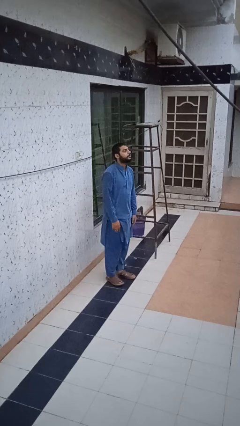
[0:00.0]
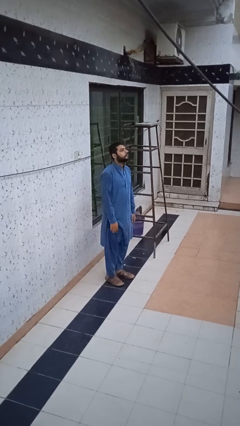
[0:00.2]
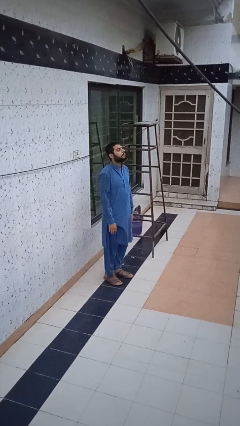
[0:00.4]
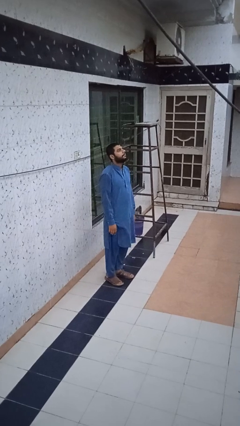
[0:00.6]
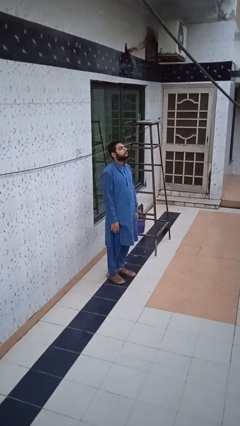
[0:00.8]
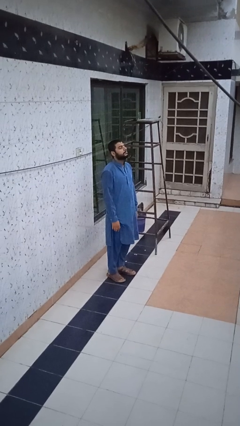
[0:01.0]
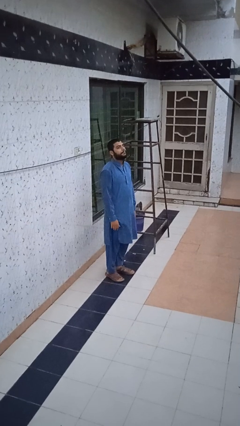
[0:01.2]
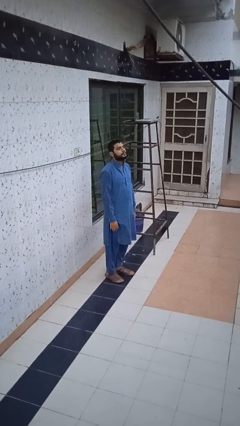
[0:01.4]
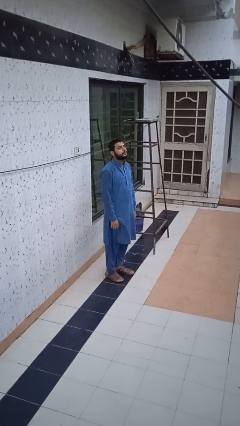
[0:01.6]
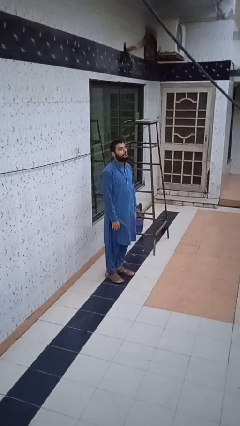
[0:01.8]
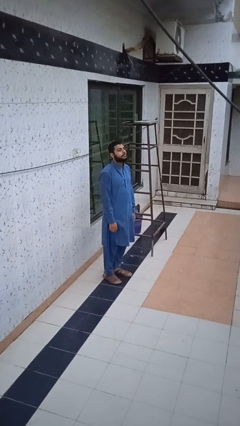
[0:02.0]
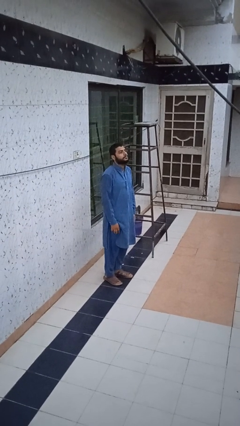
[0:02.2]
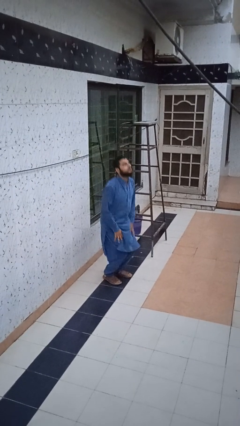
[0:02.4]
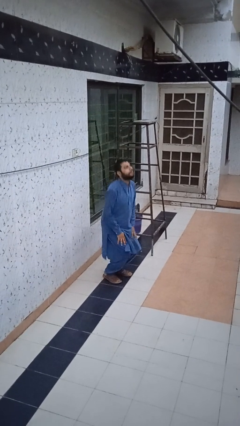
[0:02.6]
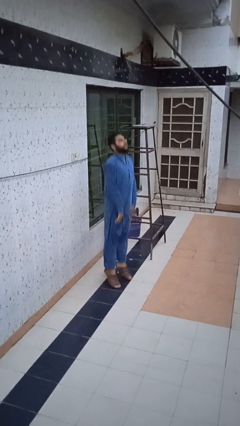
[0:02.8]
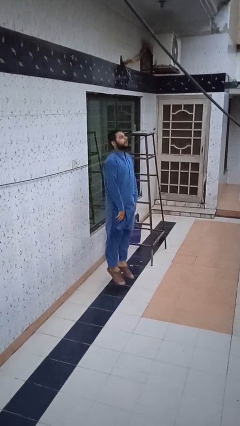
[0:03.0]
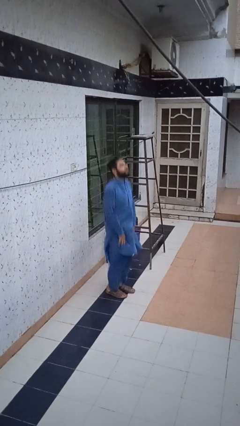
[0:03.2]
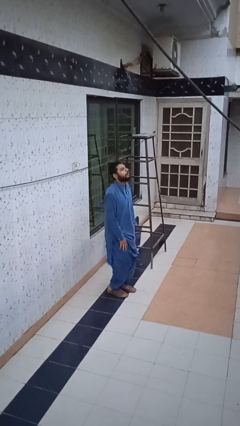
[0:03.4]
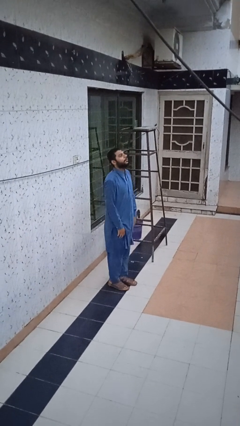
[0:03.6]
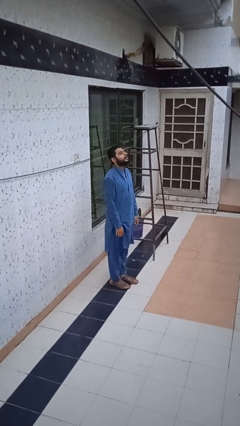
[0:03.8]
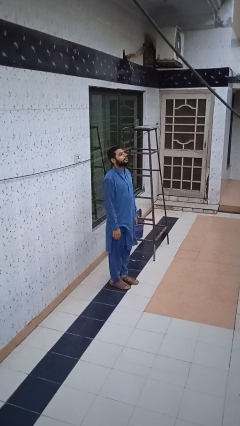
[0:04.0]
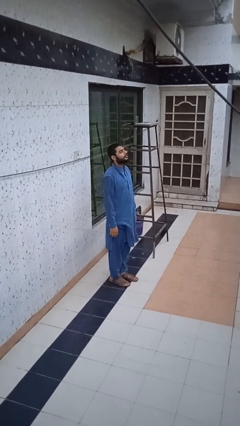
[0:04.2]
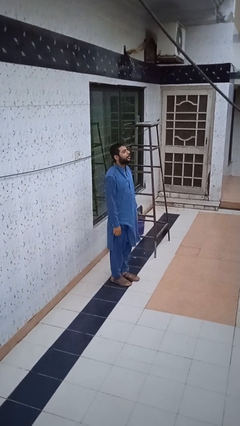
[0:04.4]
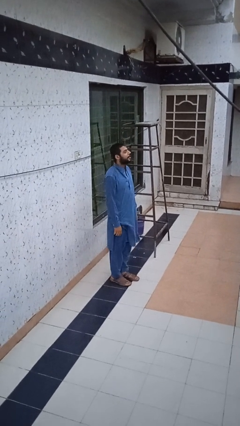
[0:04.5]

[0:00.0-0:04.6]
person jumps

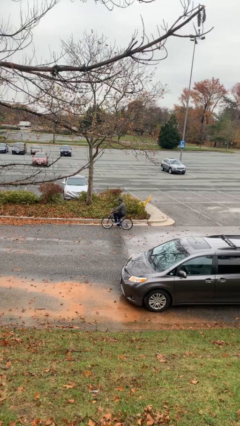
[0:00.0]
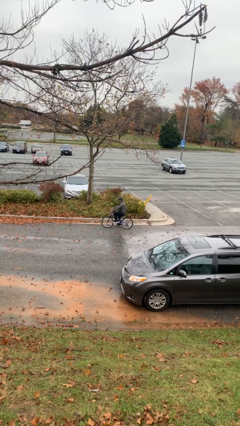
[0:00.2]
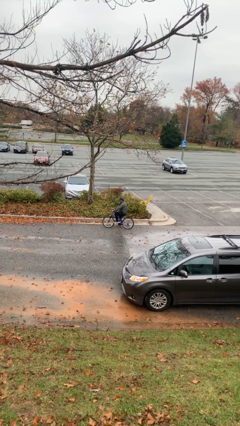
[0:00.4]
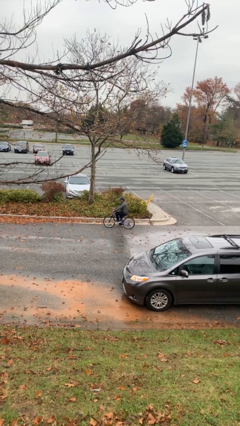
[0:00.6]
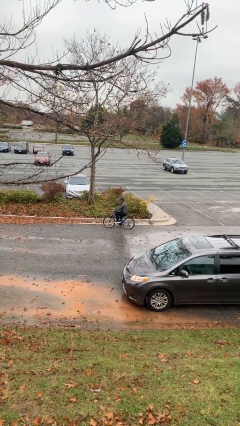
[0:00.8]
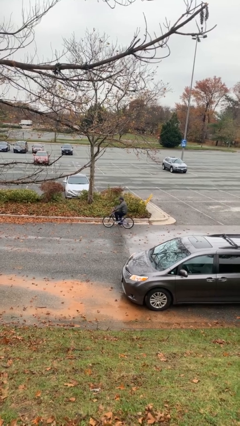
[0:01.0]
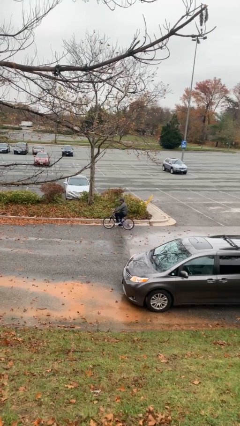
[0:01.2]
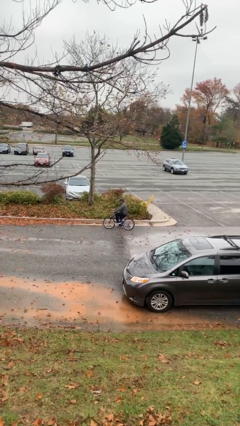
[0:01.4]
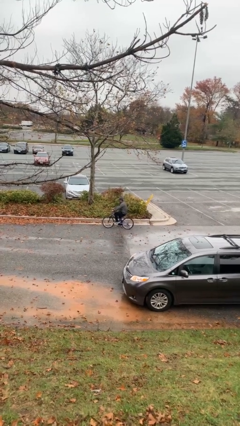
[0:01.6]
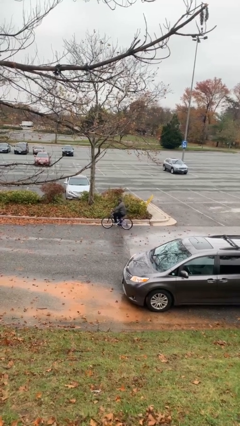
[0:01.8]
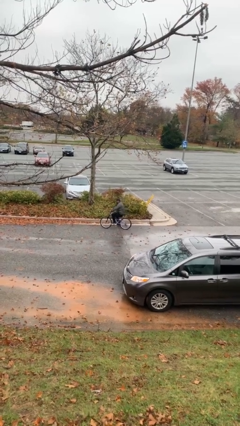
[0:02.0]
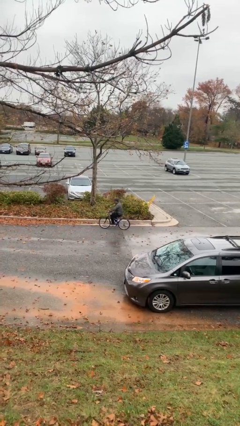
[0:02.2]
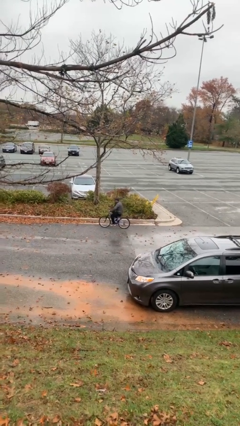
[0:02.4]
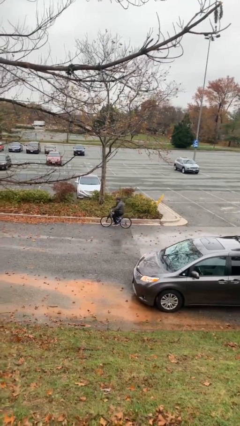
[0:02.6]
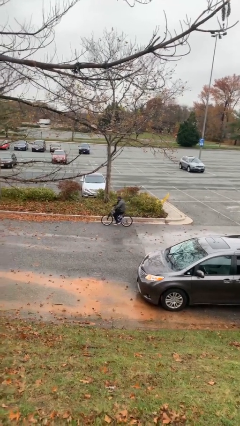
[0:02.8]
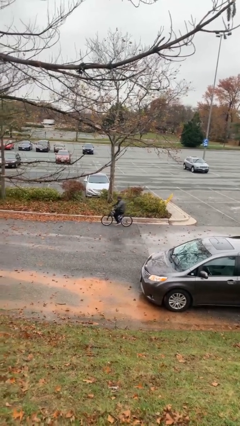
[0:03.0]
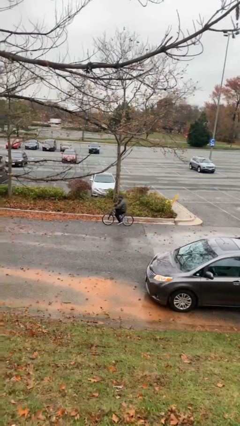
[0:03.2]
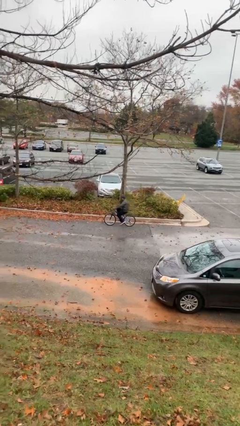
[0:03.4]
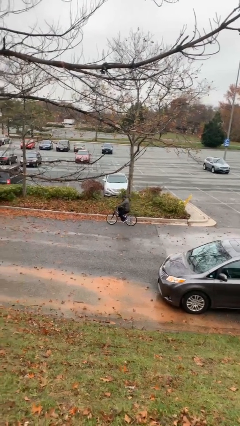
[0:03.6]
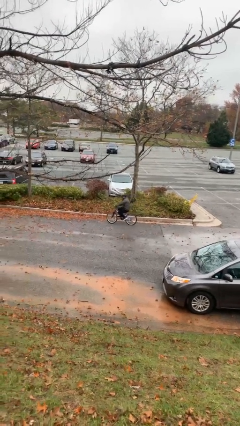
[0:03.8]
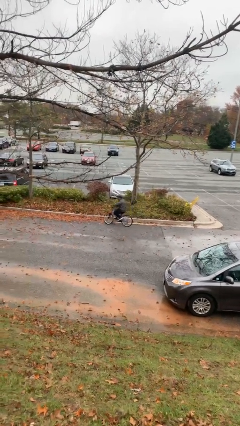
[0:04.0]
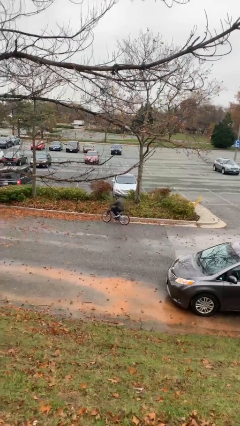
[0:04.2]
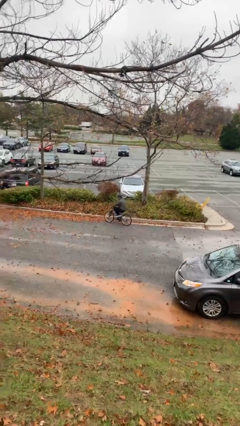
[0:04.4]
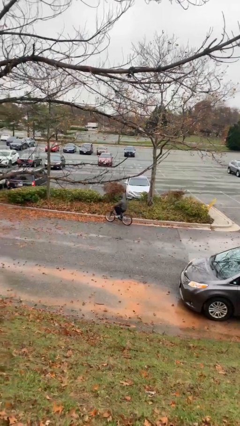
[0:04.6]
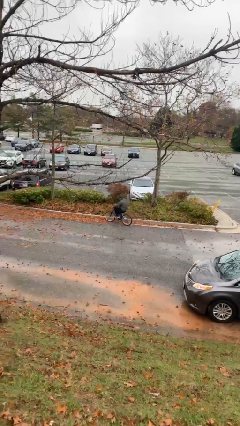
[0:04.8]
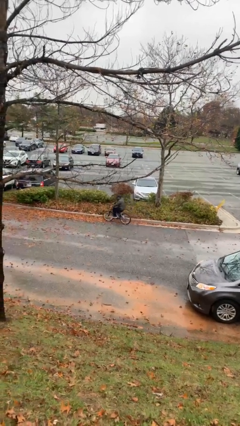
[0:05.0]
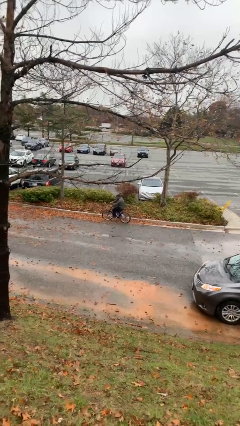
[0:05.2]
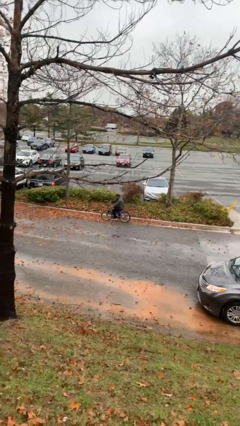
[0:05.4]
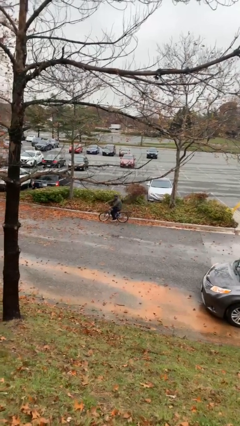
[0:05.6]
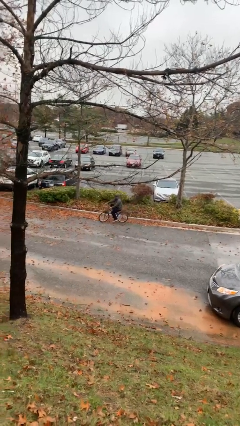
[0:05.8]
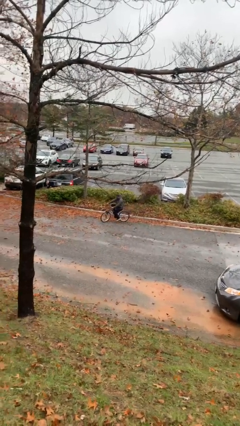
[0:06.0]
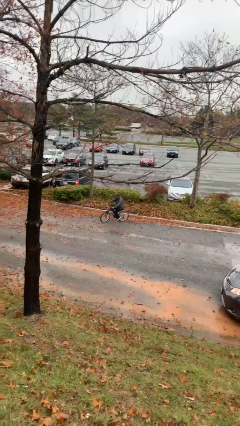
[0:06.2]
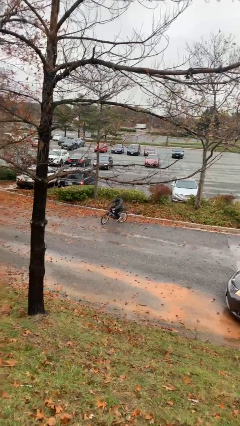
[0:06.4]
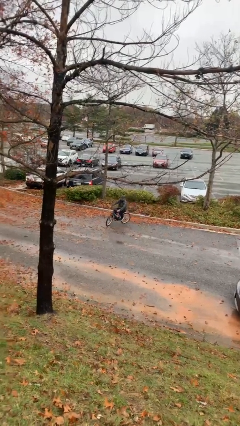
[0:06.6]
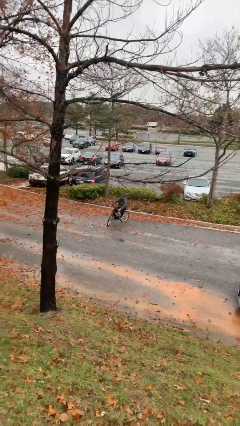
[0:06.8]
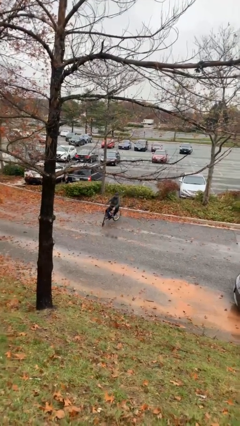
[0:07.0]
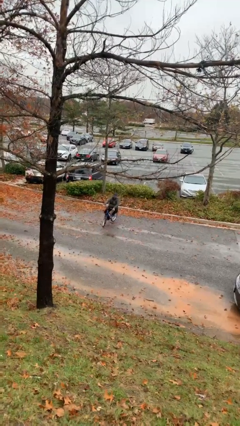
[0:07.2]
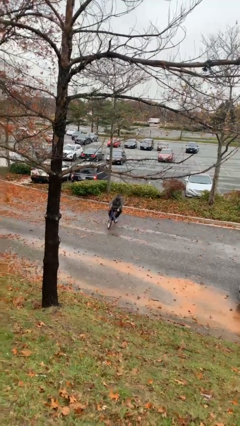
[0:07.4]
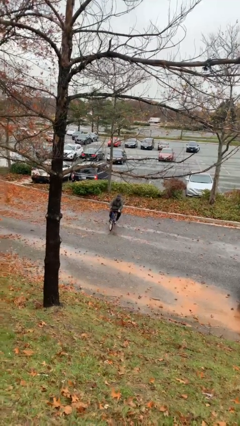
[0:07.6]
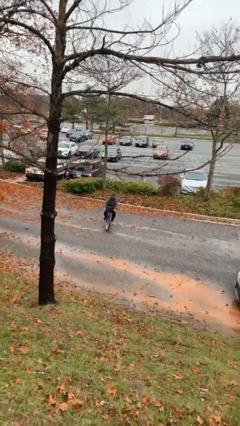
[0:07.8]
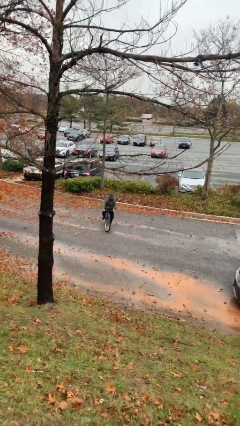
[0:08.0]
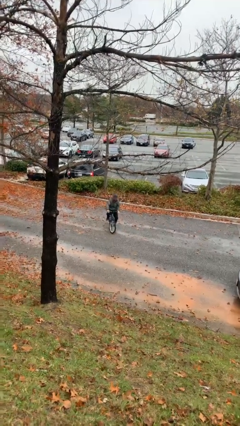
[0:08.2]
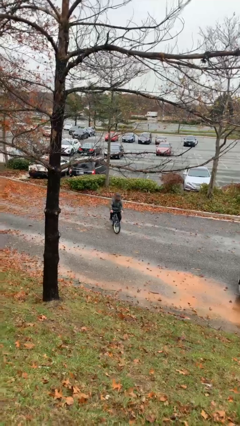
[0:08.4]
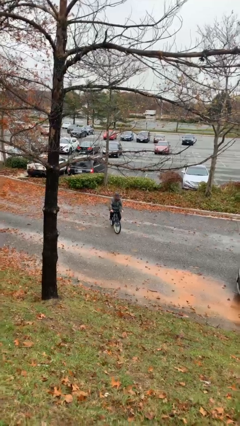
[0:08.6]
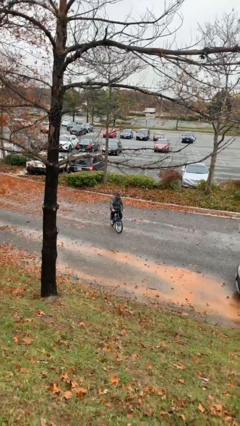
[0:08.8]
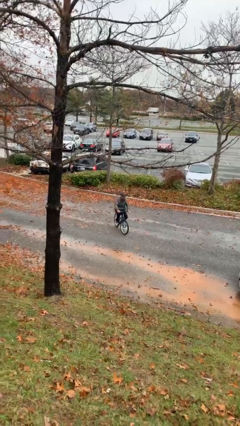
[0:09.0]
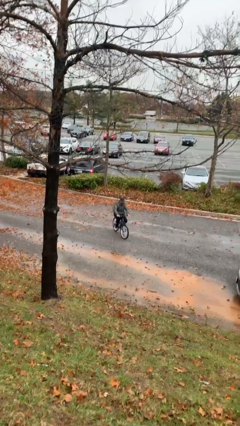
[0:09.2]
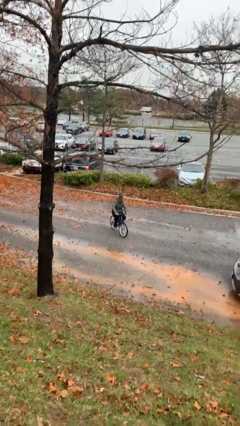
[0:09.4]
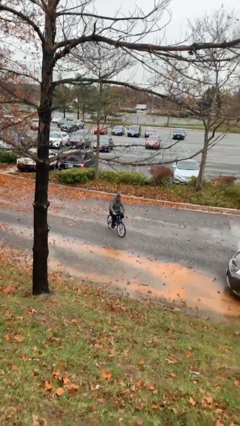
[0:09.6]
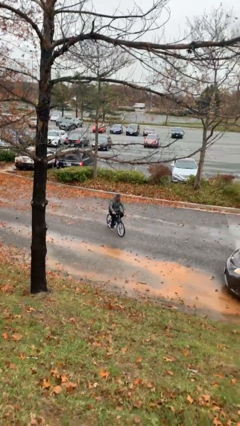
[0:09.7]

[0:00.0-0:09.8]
person rides bicycle

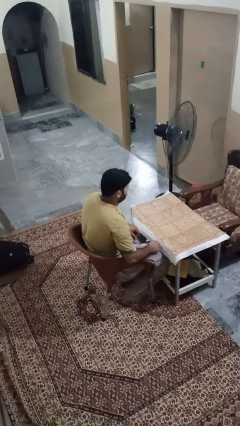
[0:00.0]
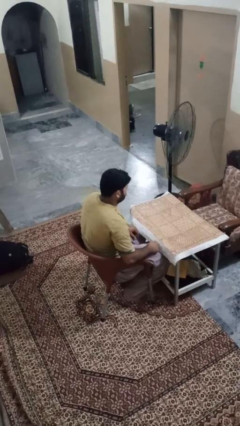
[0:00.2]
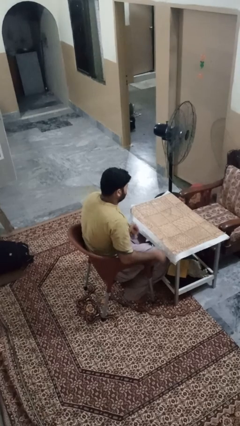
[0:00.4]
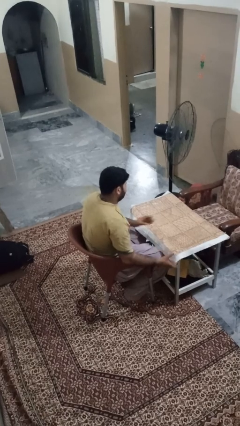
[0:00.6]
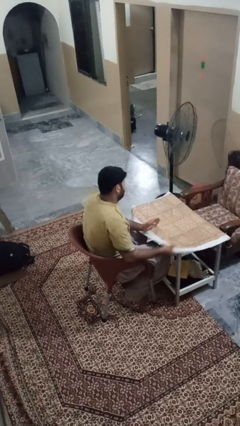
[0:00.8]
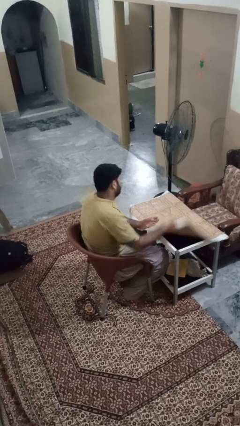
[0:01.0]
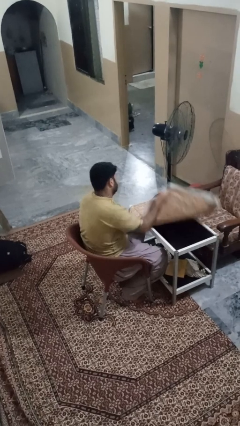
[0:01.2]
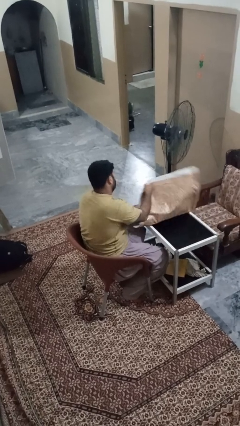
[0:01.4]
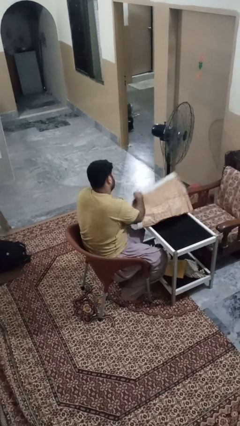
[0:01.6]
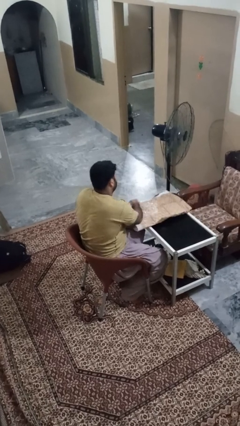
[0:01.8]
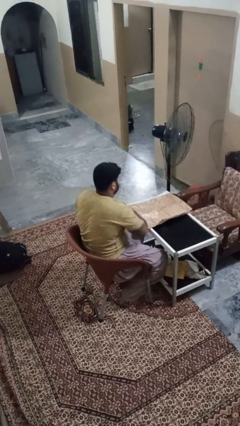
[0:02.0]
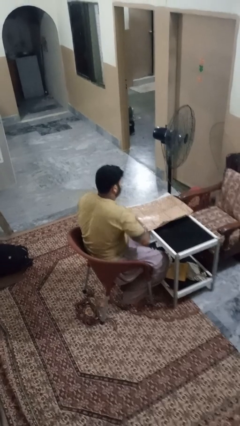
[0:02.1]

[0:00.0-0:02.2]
person folds tablecloth

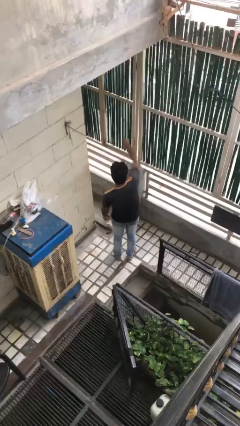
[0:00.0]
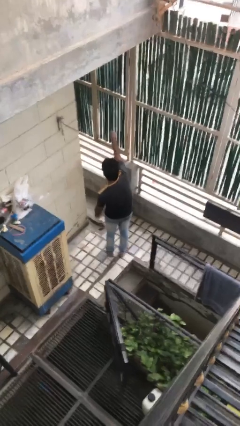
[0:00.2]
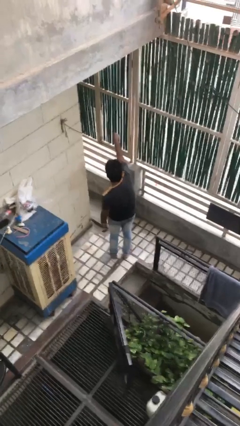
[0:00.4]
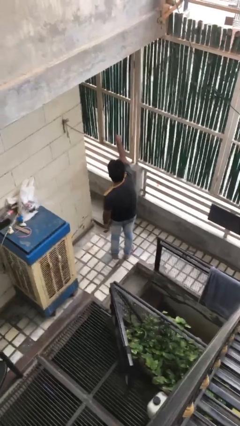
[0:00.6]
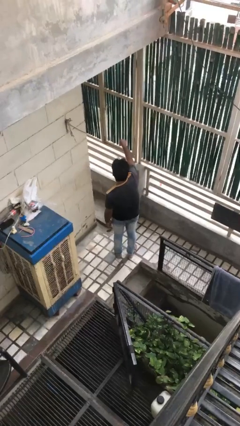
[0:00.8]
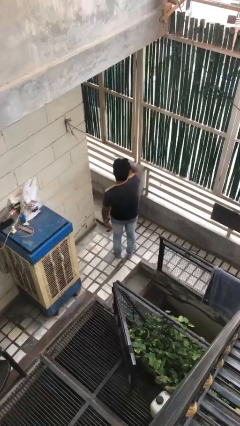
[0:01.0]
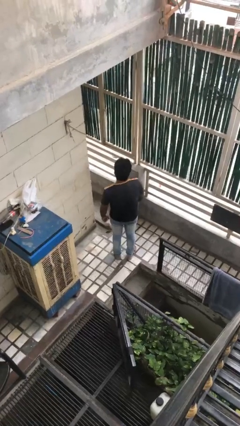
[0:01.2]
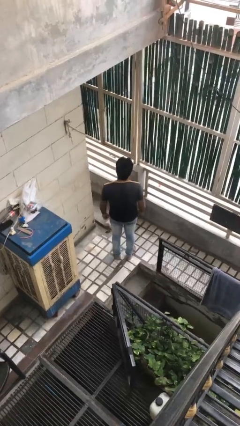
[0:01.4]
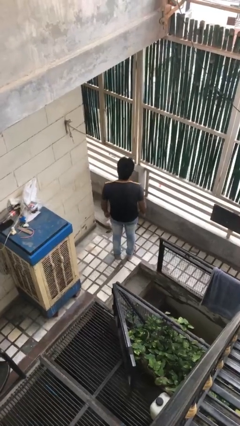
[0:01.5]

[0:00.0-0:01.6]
person punches
